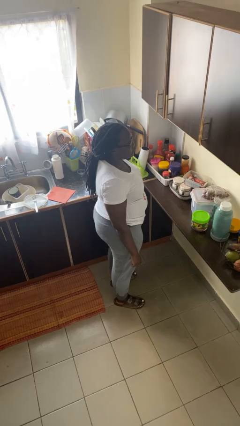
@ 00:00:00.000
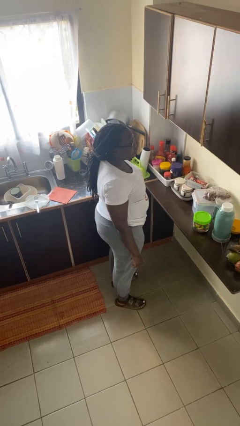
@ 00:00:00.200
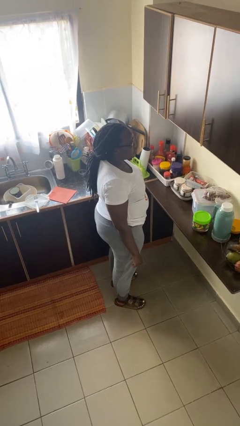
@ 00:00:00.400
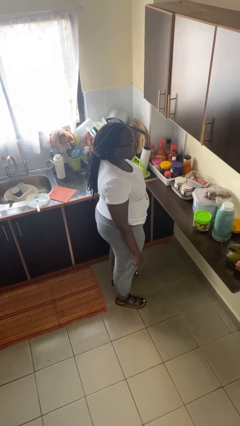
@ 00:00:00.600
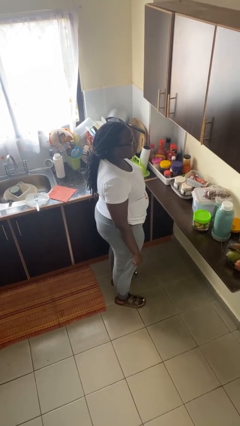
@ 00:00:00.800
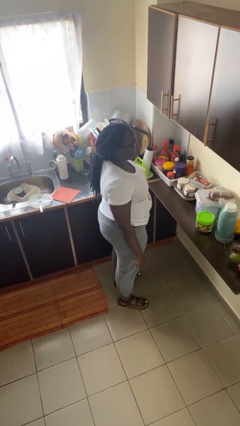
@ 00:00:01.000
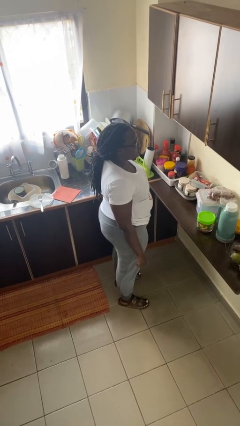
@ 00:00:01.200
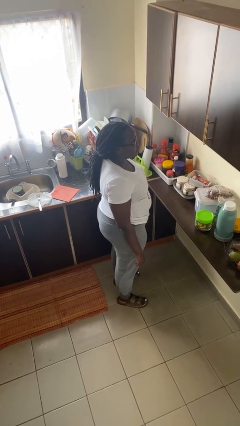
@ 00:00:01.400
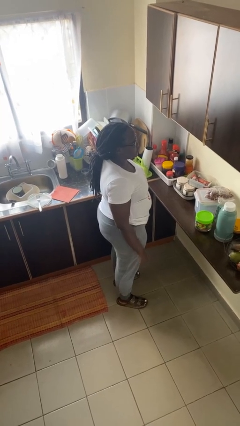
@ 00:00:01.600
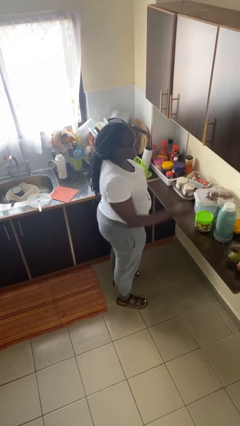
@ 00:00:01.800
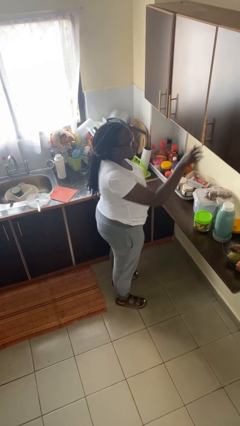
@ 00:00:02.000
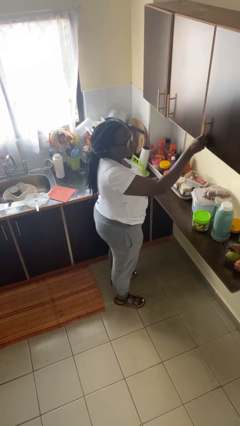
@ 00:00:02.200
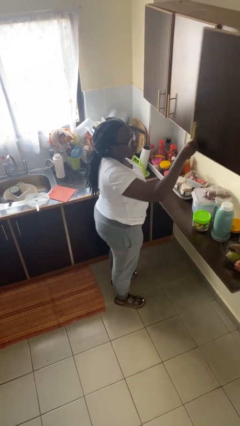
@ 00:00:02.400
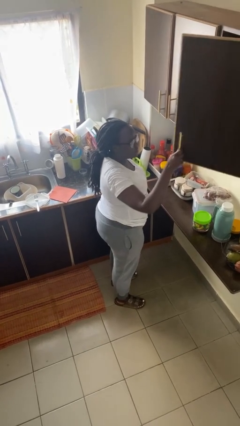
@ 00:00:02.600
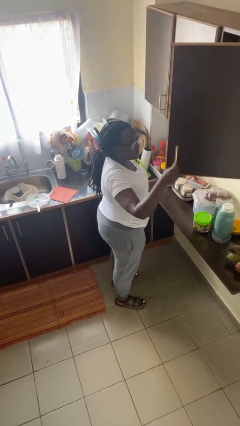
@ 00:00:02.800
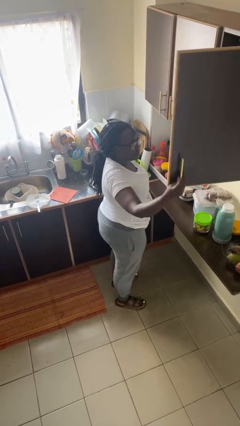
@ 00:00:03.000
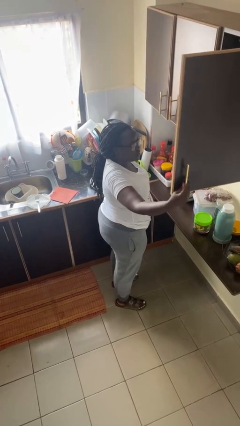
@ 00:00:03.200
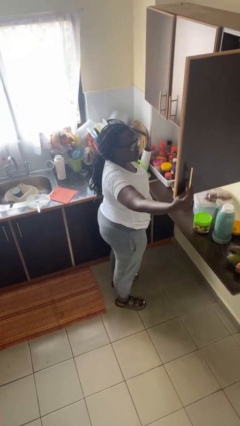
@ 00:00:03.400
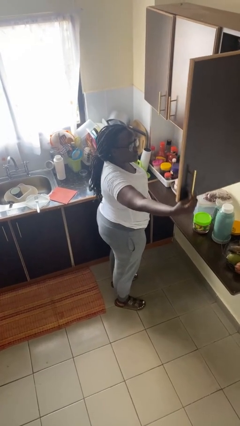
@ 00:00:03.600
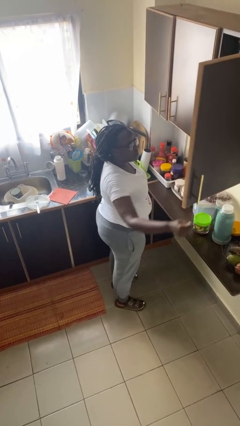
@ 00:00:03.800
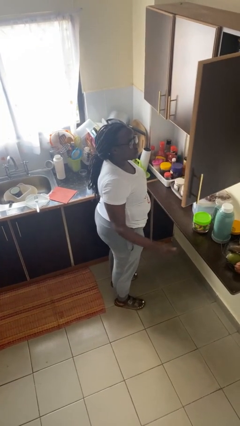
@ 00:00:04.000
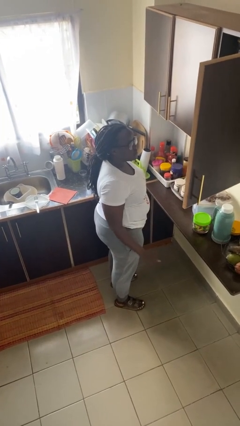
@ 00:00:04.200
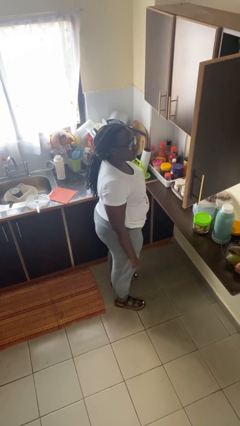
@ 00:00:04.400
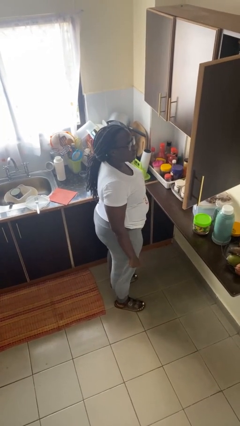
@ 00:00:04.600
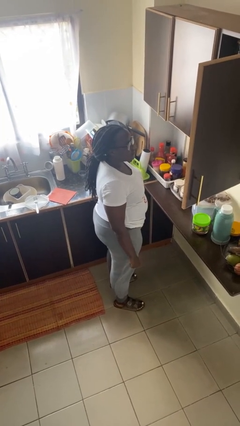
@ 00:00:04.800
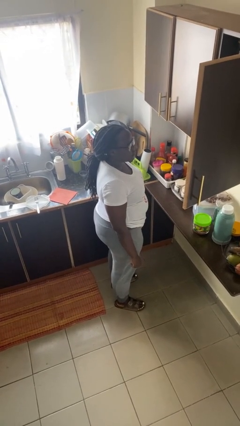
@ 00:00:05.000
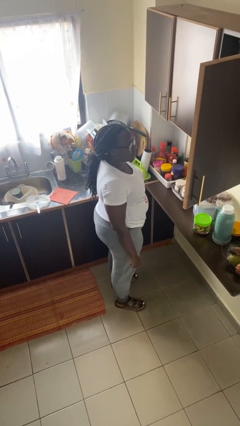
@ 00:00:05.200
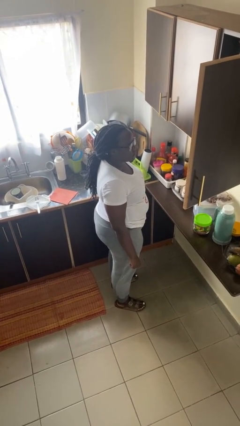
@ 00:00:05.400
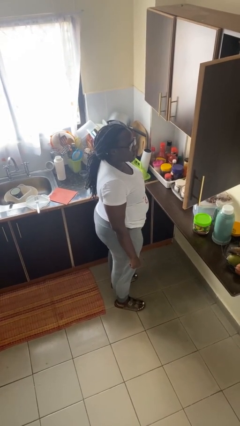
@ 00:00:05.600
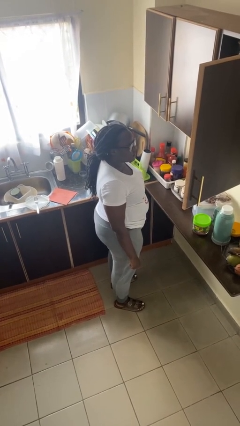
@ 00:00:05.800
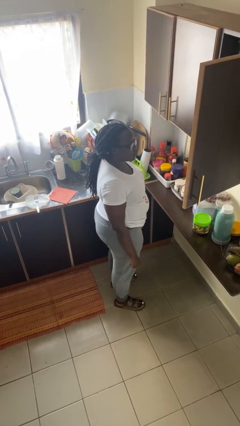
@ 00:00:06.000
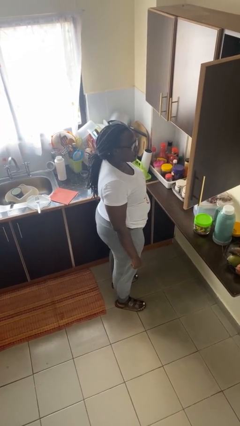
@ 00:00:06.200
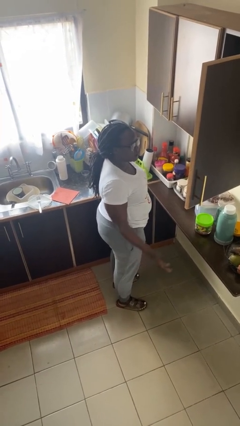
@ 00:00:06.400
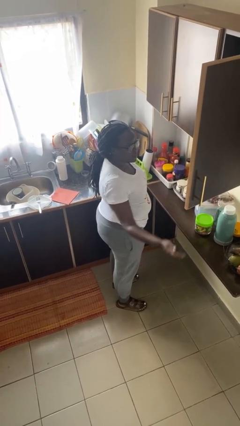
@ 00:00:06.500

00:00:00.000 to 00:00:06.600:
person opens cabinet

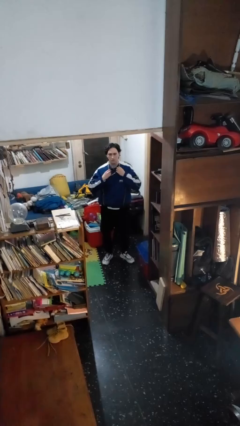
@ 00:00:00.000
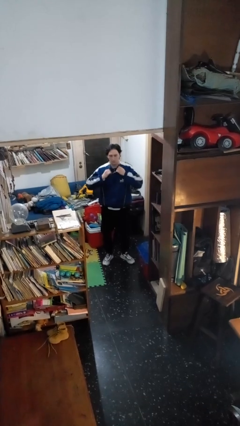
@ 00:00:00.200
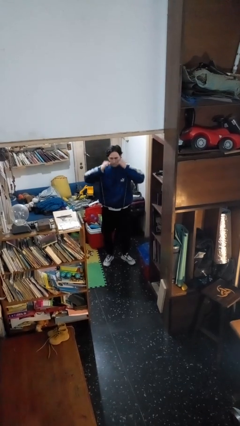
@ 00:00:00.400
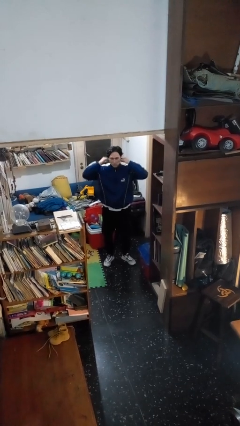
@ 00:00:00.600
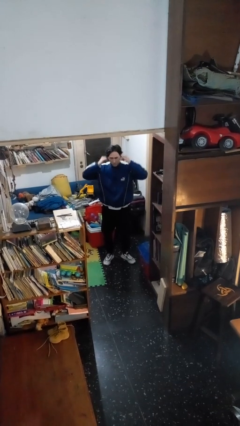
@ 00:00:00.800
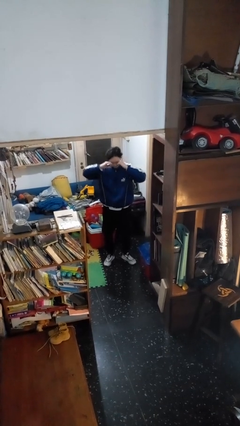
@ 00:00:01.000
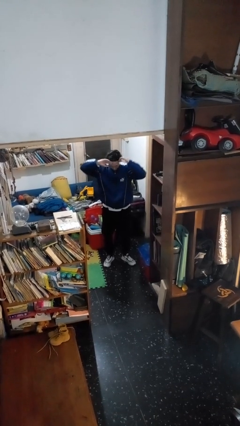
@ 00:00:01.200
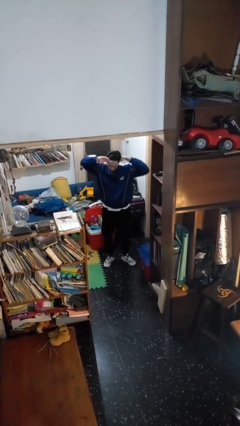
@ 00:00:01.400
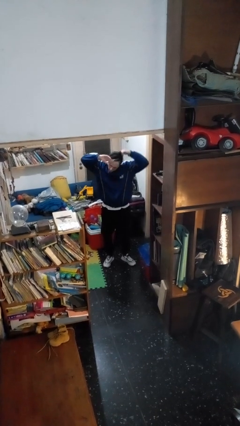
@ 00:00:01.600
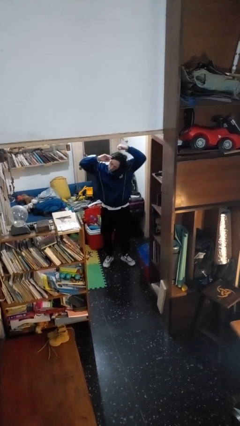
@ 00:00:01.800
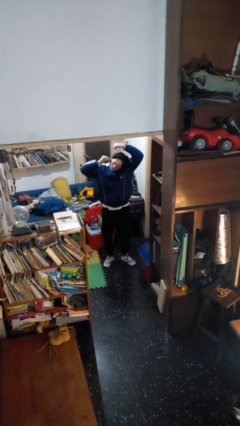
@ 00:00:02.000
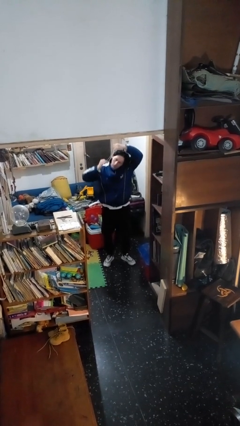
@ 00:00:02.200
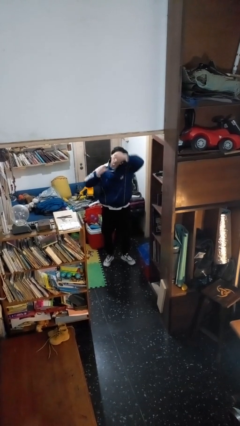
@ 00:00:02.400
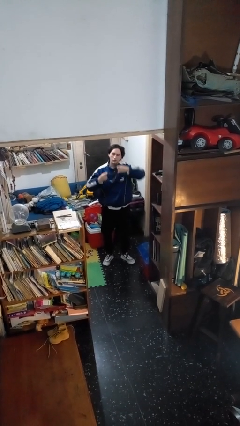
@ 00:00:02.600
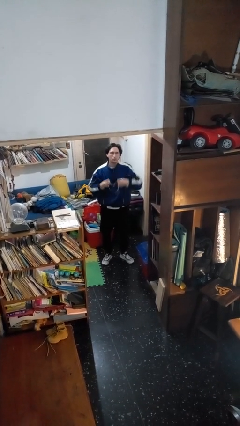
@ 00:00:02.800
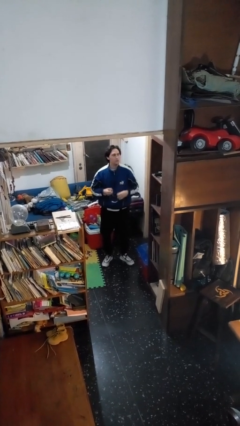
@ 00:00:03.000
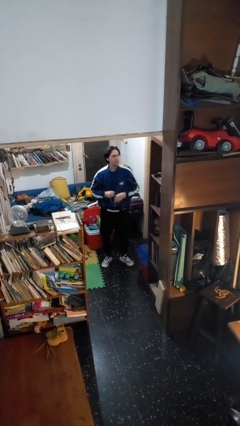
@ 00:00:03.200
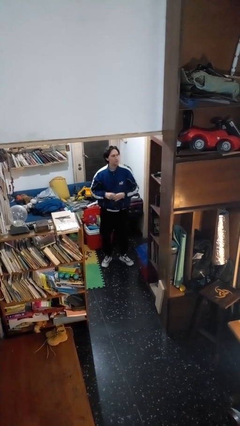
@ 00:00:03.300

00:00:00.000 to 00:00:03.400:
person takes off necklace

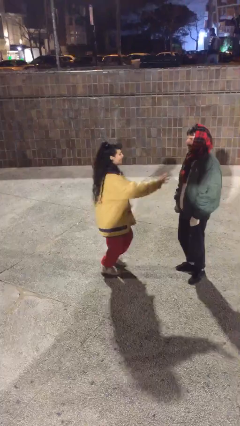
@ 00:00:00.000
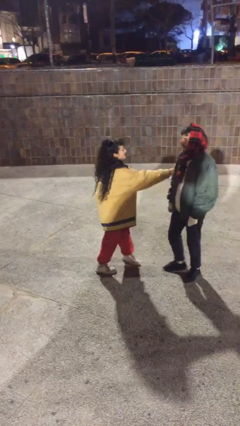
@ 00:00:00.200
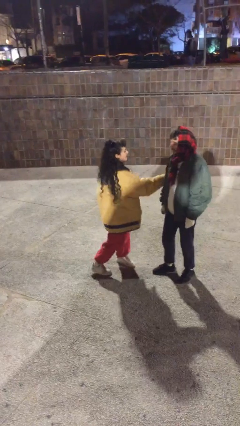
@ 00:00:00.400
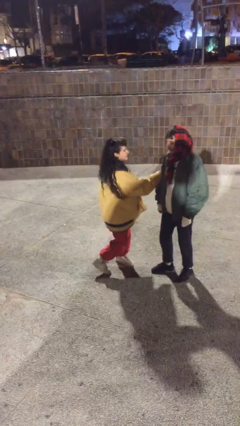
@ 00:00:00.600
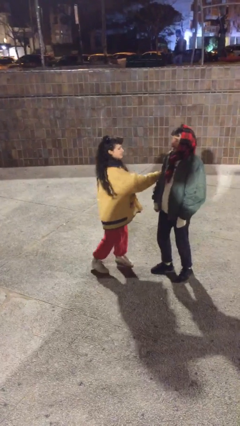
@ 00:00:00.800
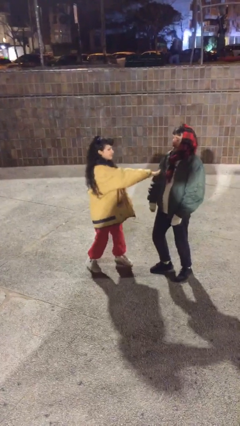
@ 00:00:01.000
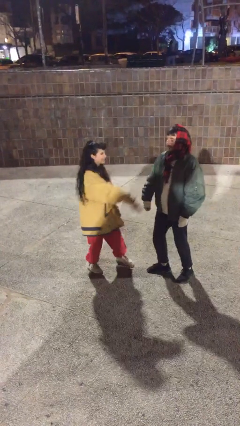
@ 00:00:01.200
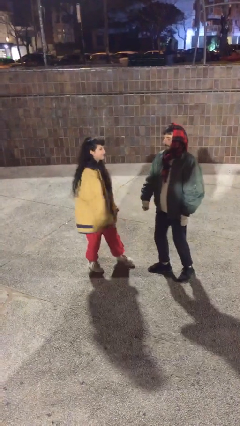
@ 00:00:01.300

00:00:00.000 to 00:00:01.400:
person grabs person by bicep

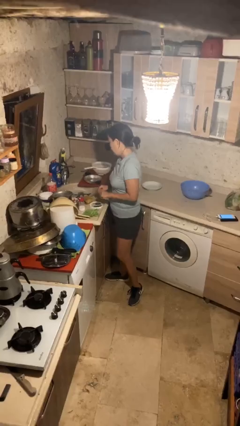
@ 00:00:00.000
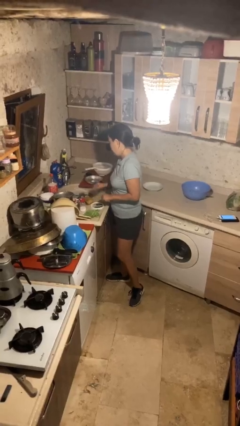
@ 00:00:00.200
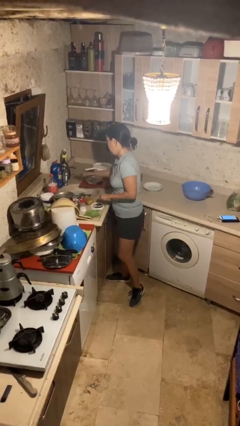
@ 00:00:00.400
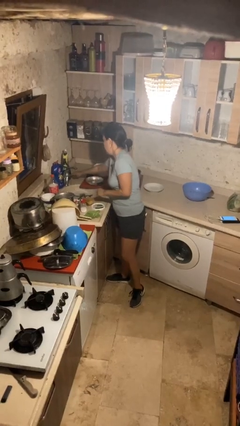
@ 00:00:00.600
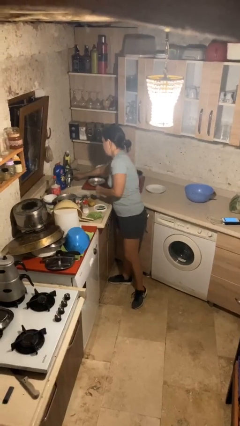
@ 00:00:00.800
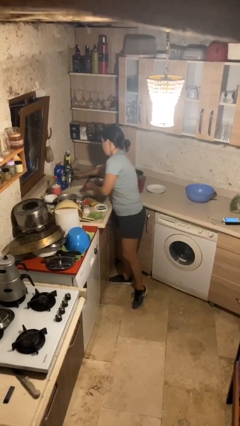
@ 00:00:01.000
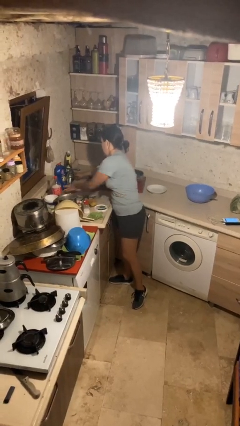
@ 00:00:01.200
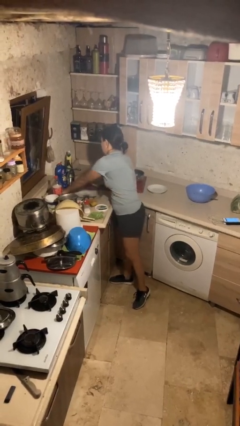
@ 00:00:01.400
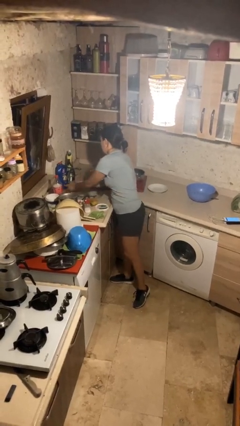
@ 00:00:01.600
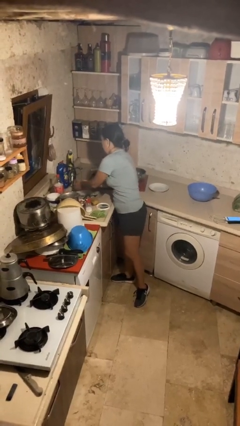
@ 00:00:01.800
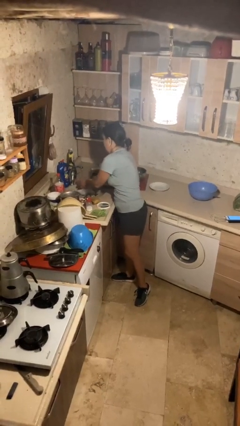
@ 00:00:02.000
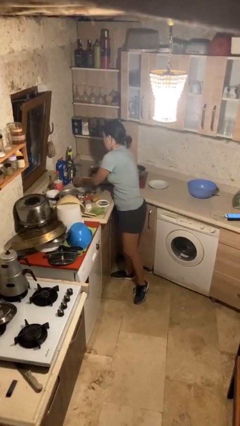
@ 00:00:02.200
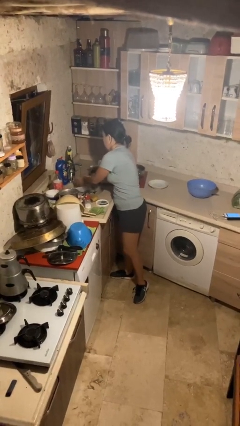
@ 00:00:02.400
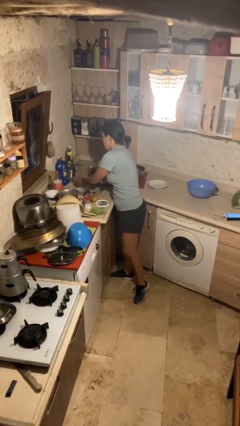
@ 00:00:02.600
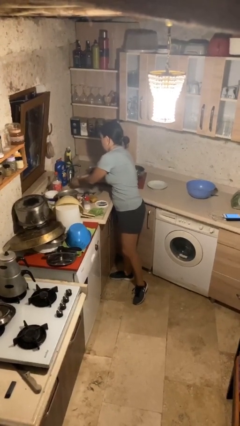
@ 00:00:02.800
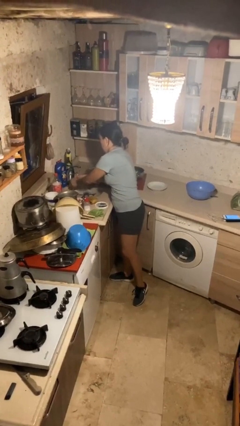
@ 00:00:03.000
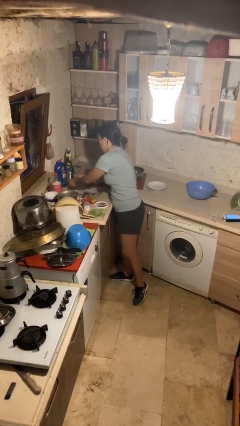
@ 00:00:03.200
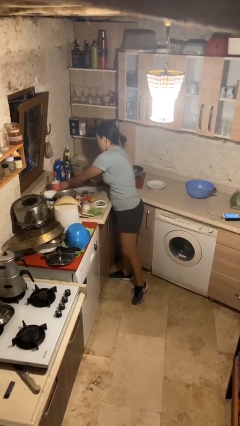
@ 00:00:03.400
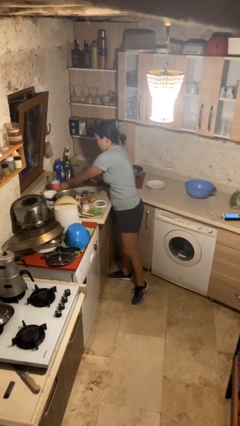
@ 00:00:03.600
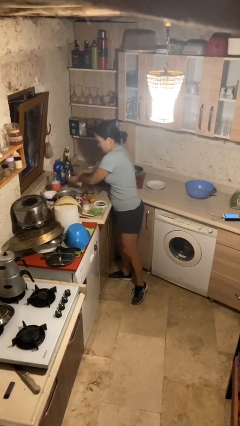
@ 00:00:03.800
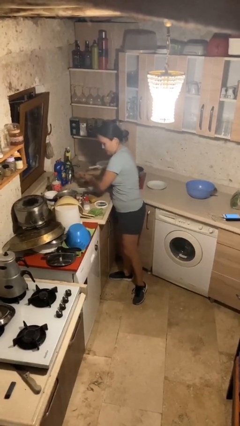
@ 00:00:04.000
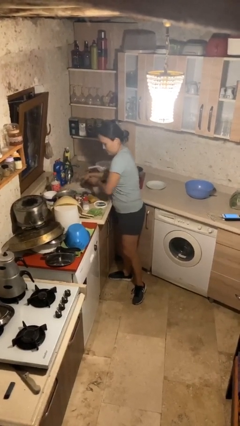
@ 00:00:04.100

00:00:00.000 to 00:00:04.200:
person washes hands

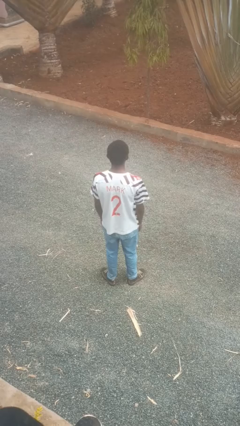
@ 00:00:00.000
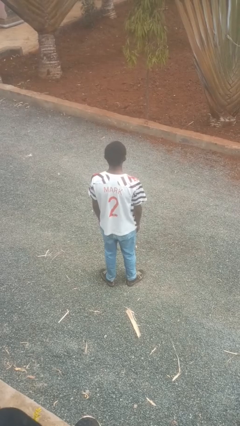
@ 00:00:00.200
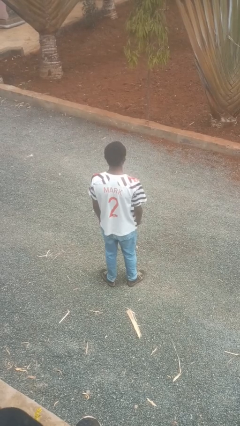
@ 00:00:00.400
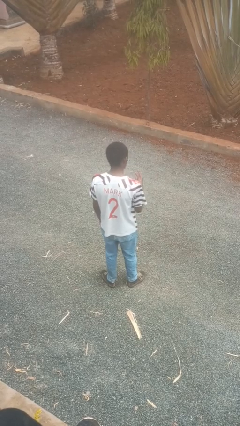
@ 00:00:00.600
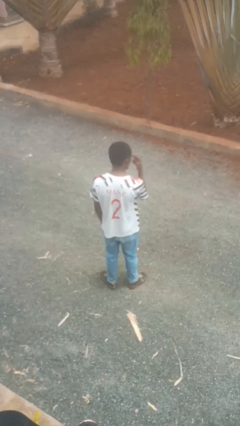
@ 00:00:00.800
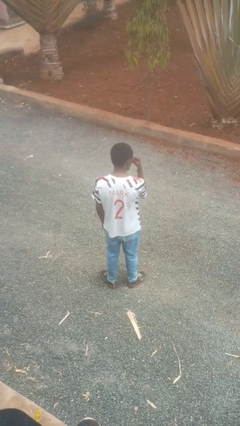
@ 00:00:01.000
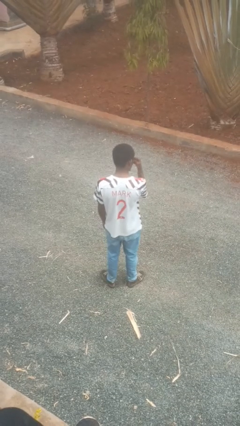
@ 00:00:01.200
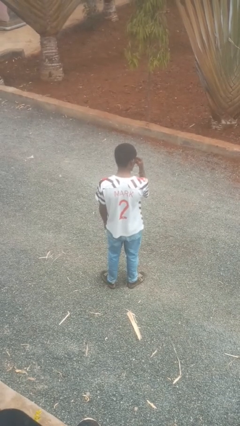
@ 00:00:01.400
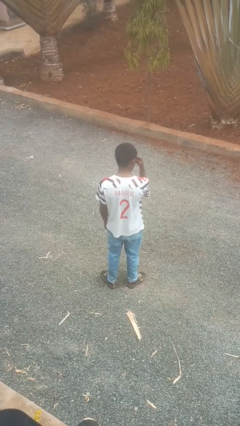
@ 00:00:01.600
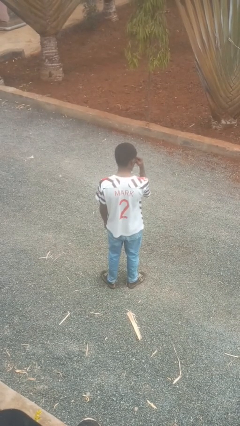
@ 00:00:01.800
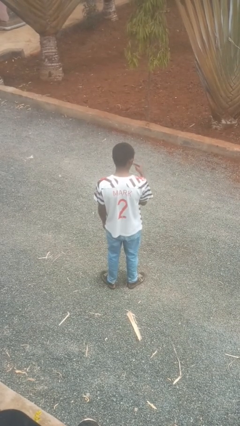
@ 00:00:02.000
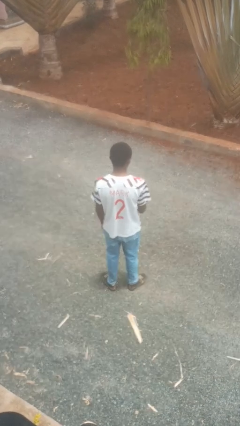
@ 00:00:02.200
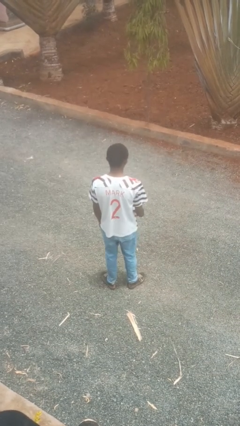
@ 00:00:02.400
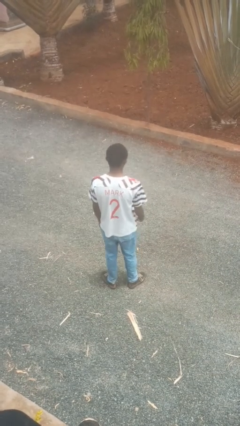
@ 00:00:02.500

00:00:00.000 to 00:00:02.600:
person gestures watch closely
